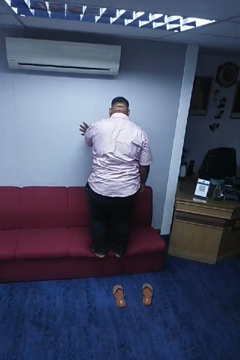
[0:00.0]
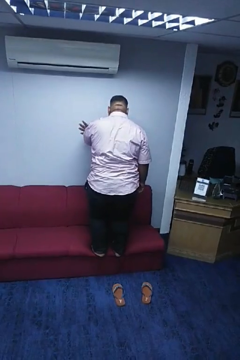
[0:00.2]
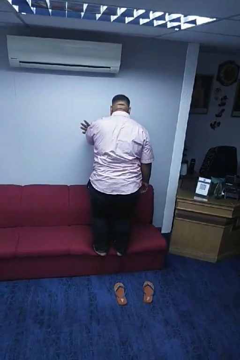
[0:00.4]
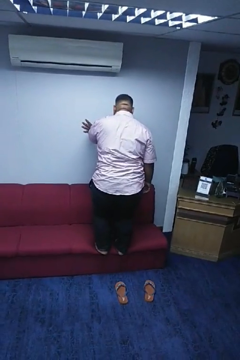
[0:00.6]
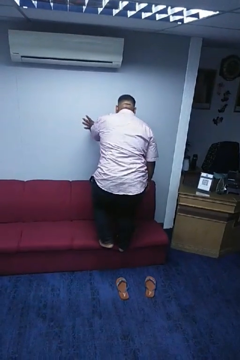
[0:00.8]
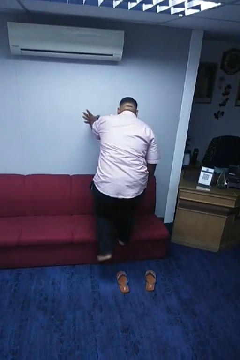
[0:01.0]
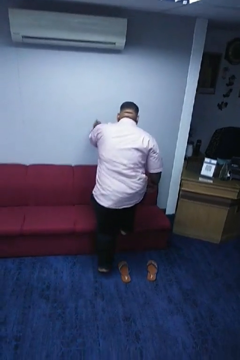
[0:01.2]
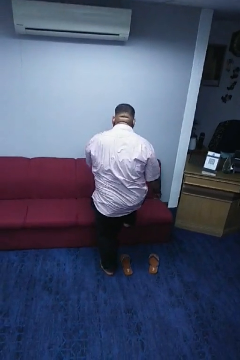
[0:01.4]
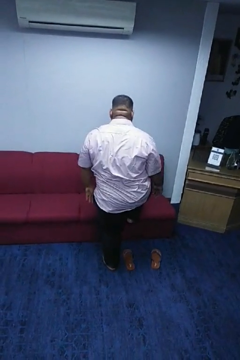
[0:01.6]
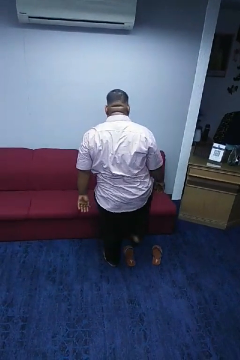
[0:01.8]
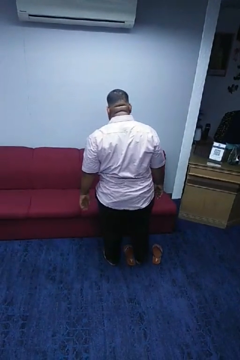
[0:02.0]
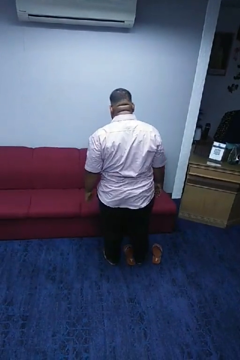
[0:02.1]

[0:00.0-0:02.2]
person climbs off couch

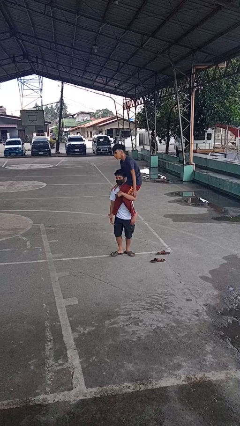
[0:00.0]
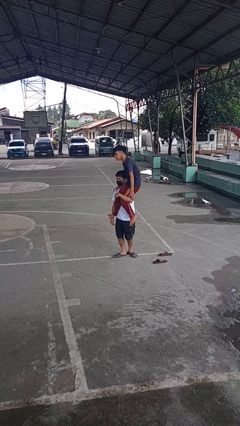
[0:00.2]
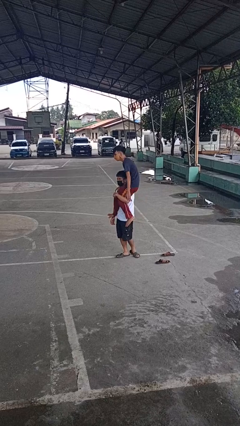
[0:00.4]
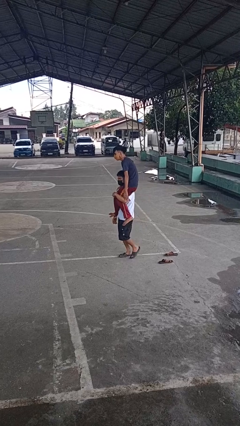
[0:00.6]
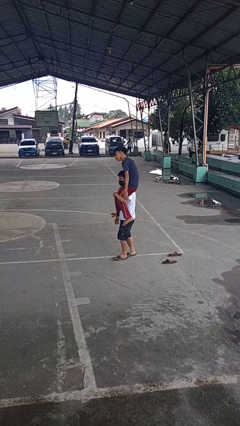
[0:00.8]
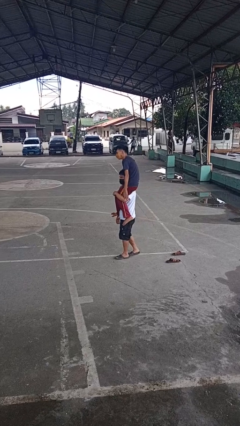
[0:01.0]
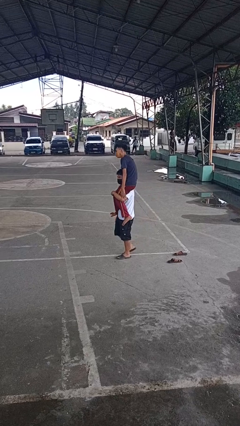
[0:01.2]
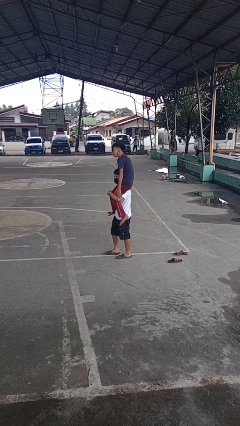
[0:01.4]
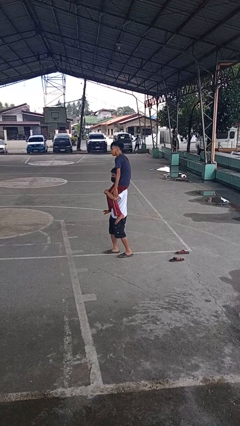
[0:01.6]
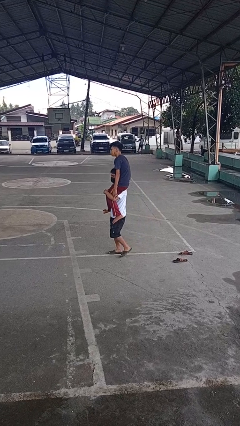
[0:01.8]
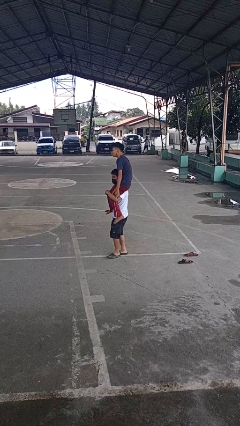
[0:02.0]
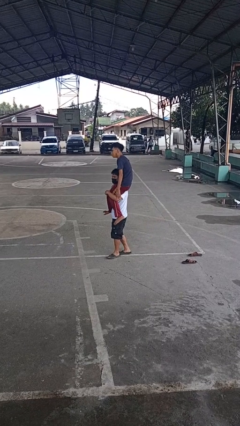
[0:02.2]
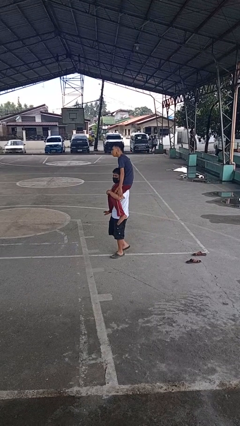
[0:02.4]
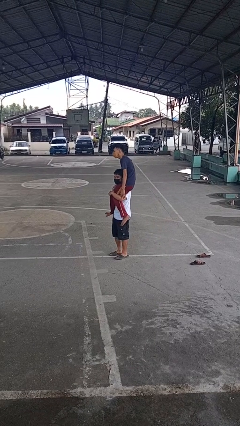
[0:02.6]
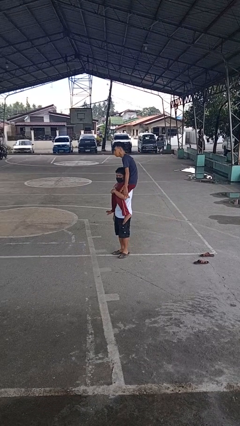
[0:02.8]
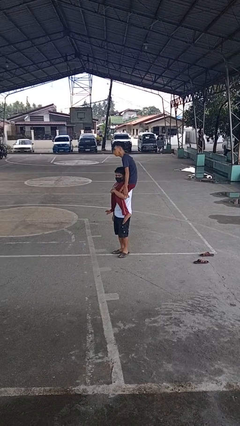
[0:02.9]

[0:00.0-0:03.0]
person carries person on shoulders

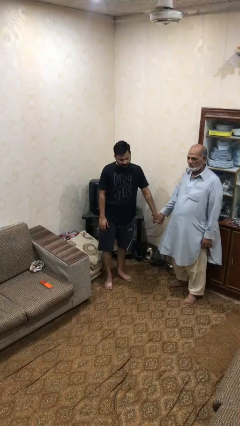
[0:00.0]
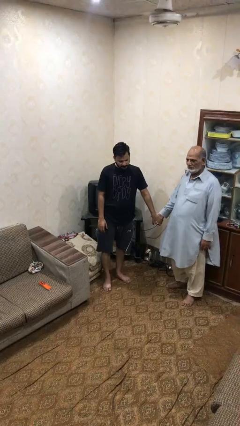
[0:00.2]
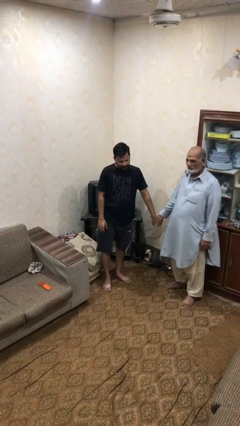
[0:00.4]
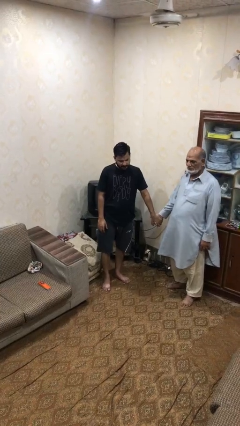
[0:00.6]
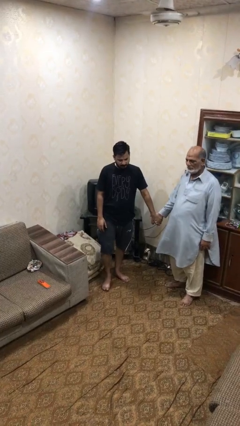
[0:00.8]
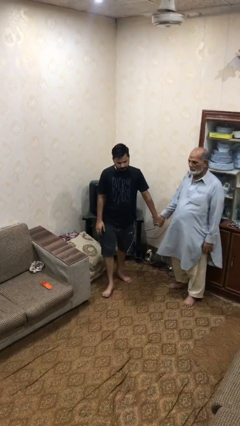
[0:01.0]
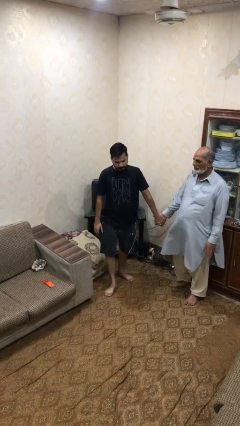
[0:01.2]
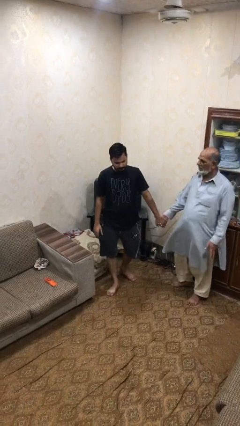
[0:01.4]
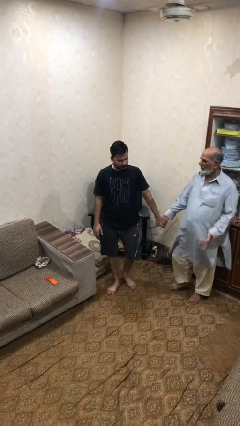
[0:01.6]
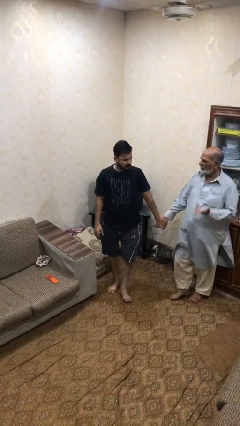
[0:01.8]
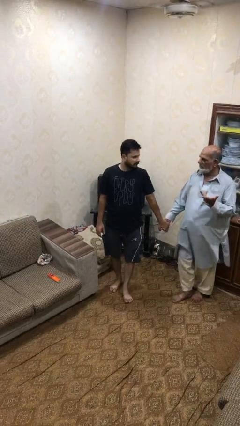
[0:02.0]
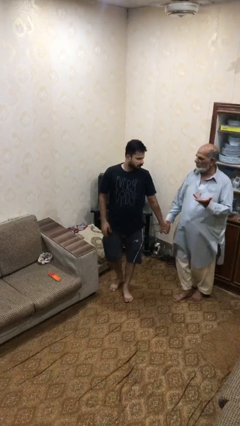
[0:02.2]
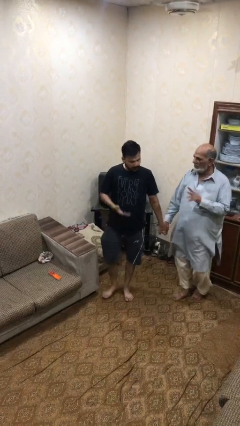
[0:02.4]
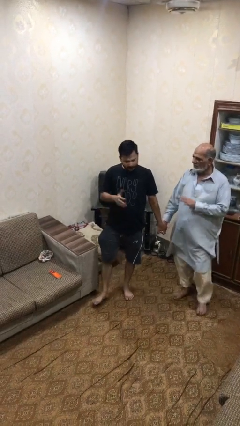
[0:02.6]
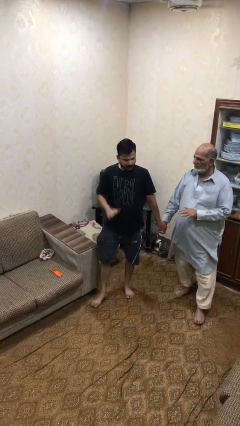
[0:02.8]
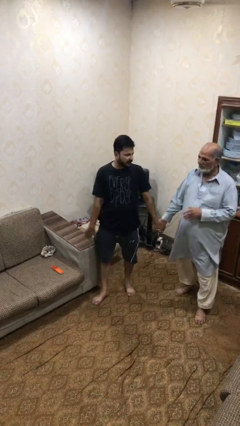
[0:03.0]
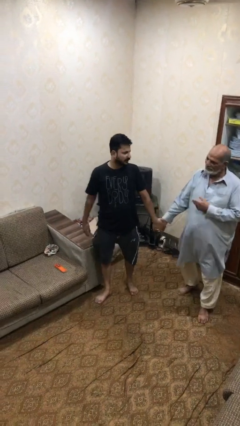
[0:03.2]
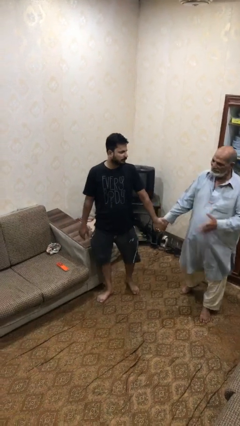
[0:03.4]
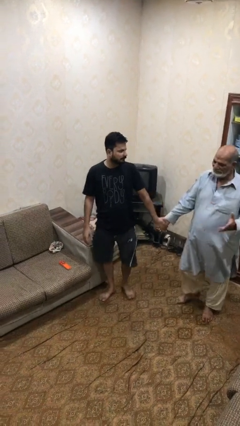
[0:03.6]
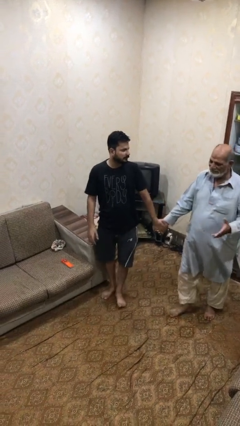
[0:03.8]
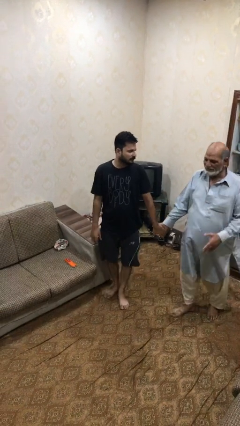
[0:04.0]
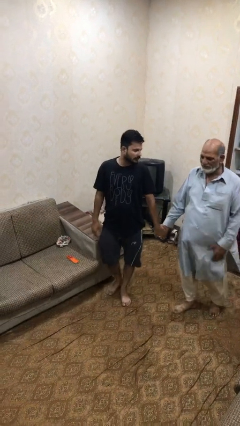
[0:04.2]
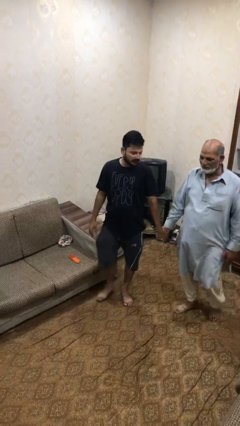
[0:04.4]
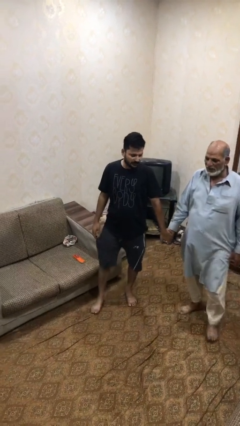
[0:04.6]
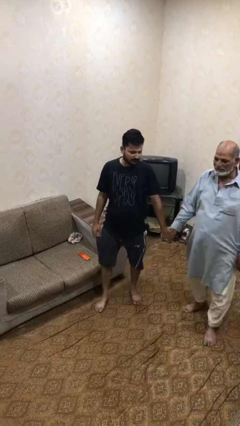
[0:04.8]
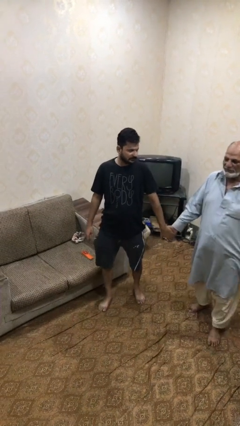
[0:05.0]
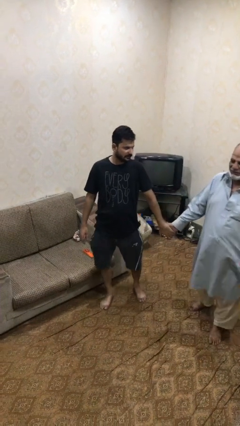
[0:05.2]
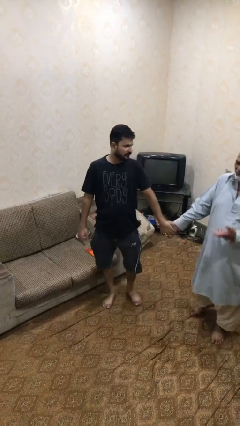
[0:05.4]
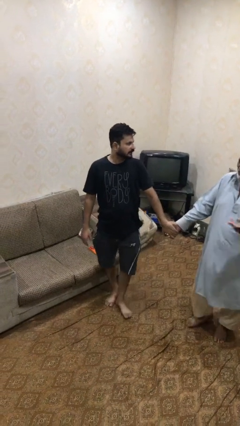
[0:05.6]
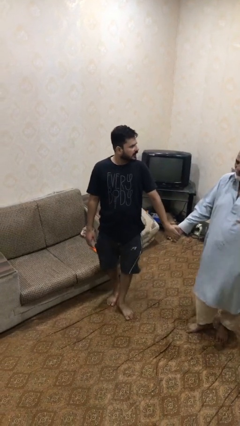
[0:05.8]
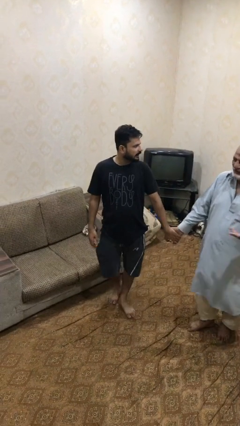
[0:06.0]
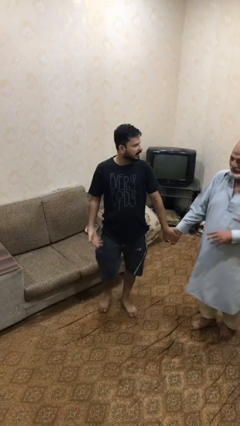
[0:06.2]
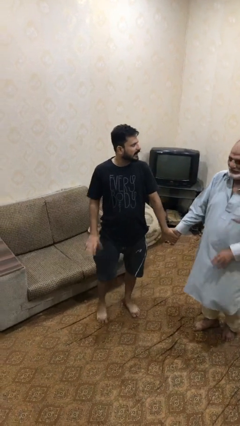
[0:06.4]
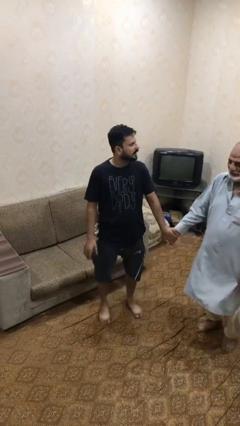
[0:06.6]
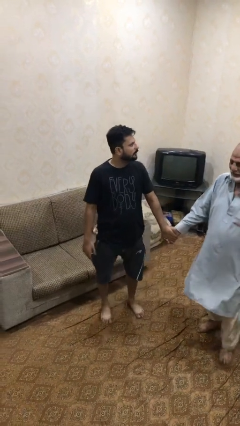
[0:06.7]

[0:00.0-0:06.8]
person holds hand

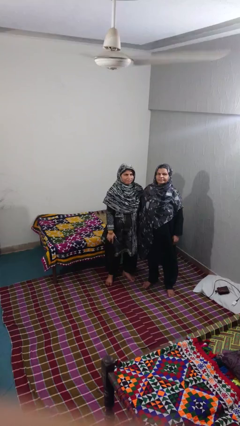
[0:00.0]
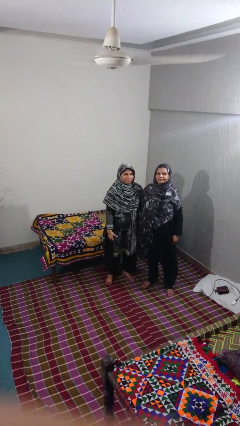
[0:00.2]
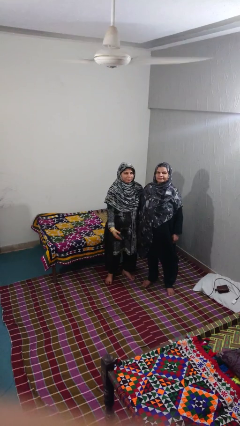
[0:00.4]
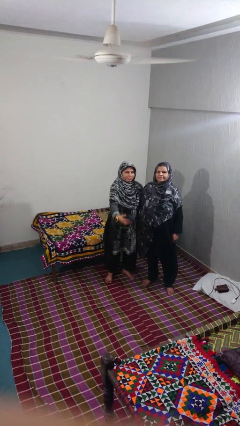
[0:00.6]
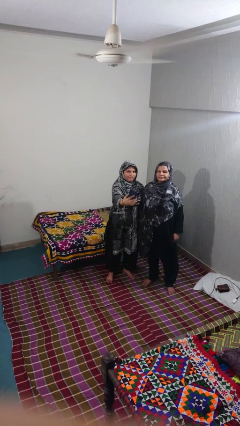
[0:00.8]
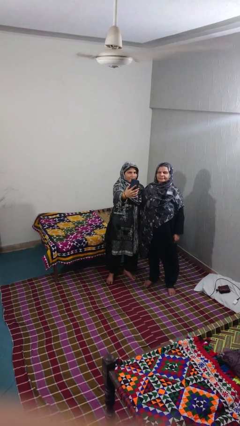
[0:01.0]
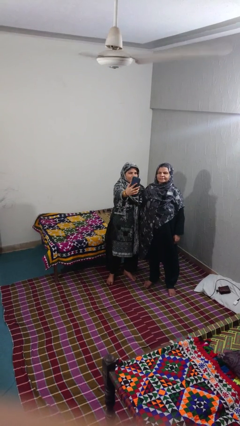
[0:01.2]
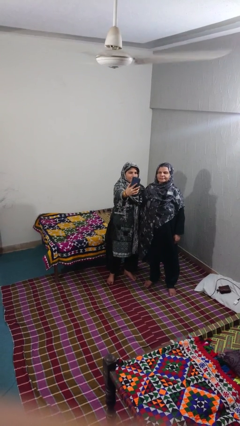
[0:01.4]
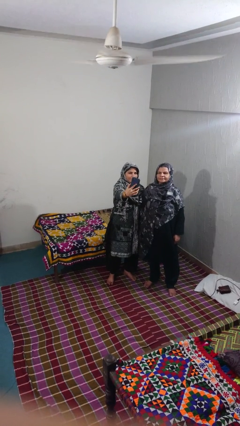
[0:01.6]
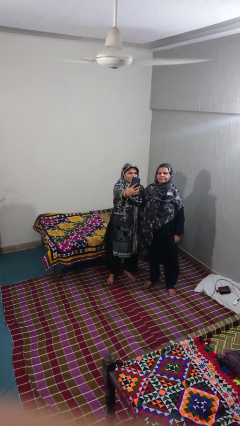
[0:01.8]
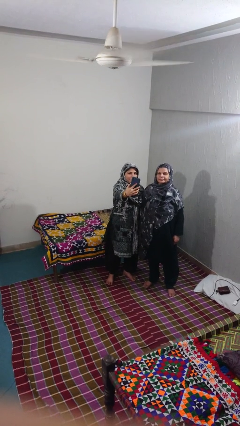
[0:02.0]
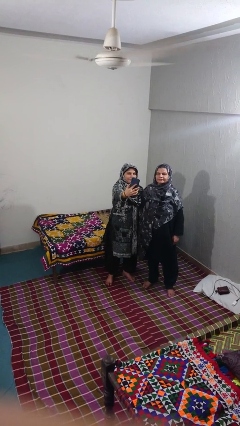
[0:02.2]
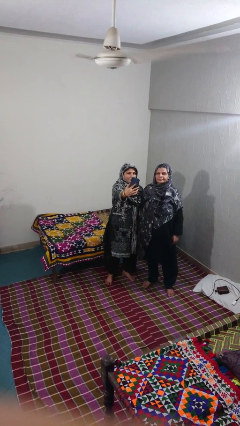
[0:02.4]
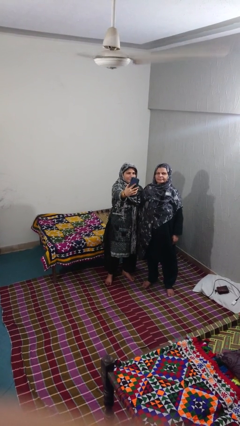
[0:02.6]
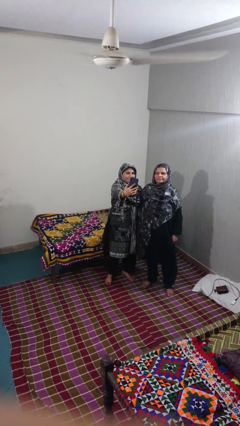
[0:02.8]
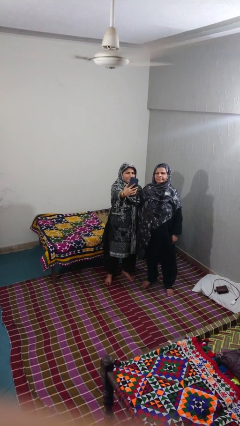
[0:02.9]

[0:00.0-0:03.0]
person takes selfie with person

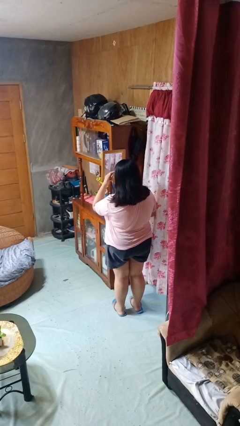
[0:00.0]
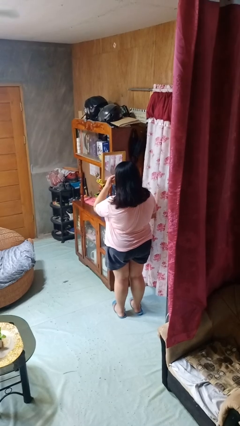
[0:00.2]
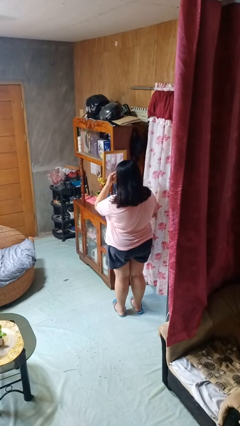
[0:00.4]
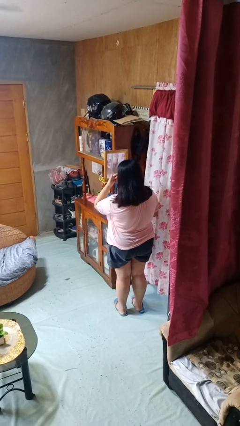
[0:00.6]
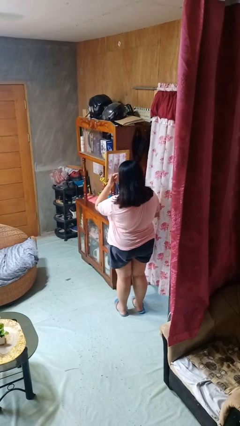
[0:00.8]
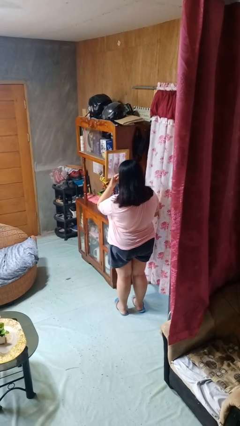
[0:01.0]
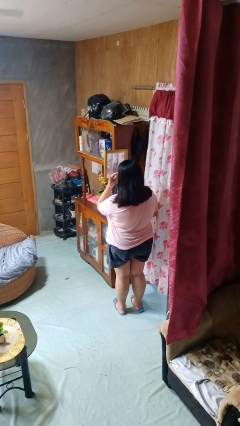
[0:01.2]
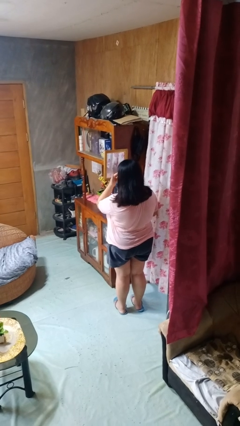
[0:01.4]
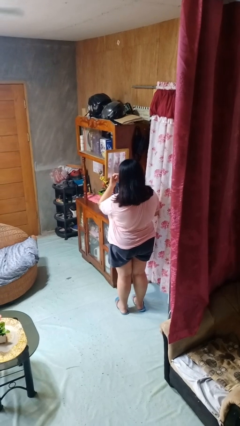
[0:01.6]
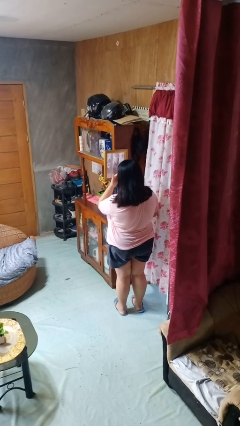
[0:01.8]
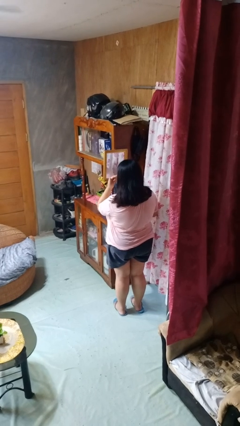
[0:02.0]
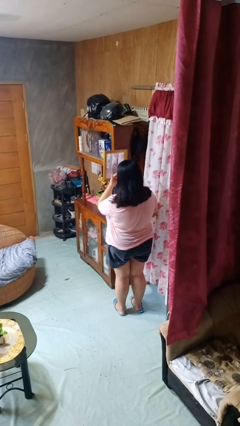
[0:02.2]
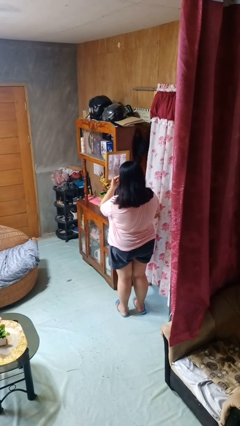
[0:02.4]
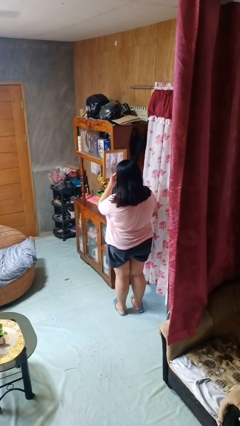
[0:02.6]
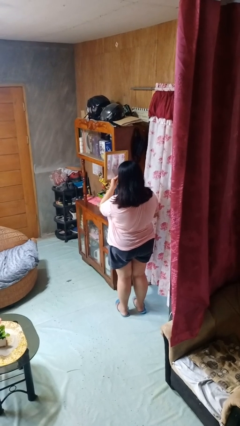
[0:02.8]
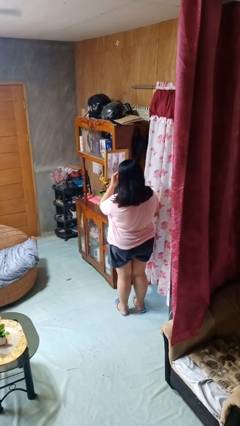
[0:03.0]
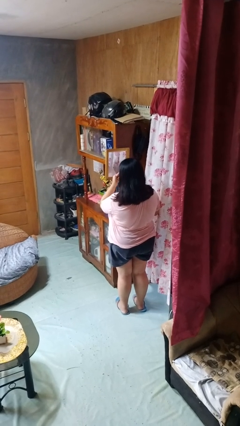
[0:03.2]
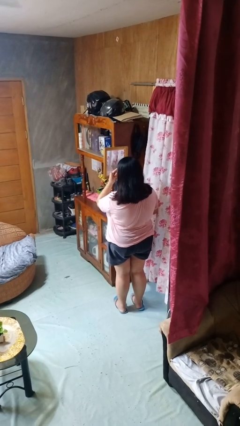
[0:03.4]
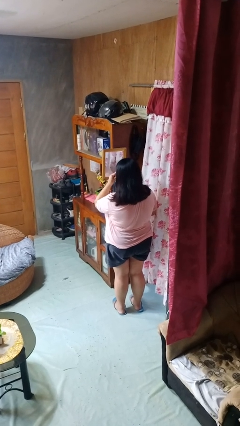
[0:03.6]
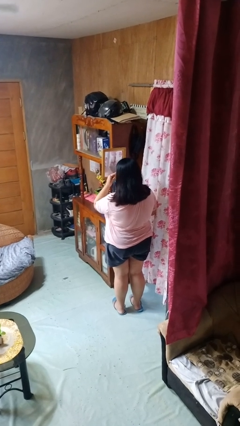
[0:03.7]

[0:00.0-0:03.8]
person applies eye makeup
